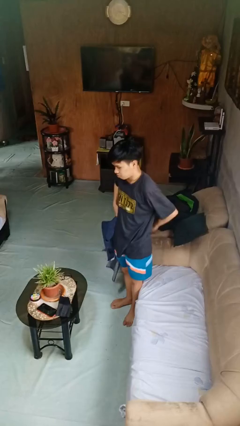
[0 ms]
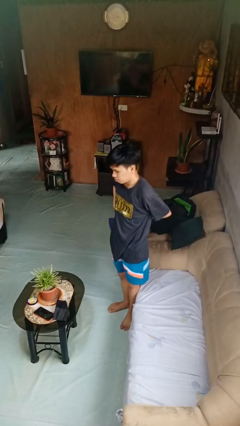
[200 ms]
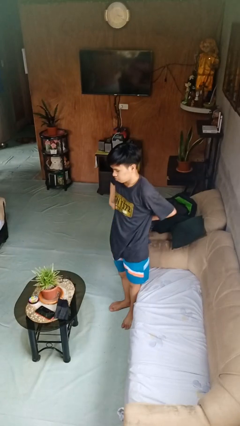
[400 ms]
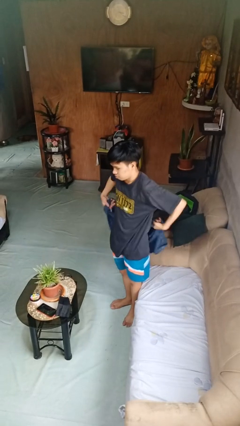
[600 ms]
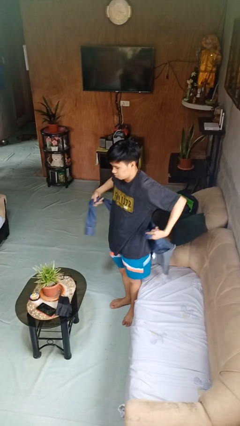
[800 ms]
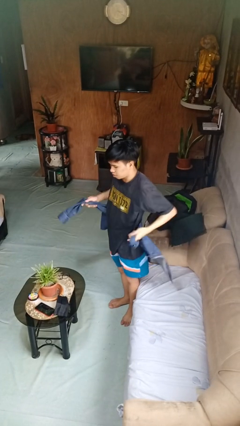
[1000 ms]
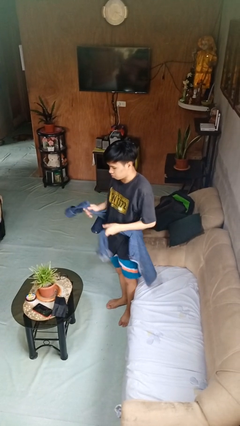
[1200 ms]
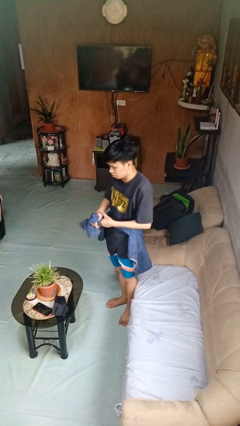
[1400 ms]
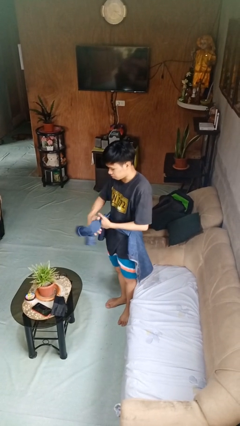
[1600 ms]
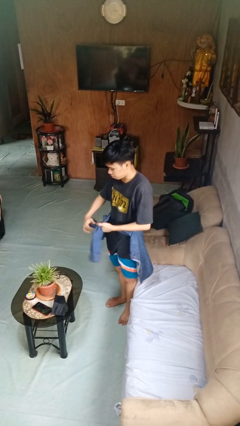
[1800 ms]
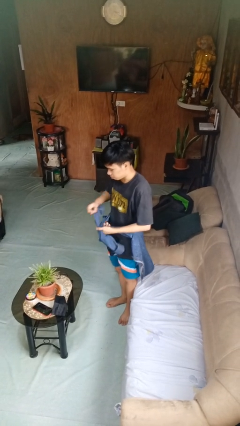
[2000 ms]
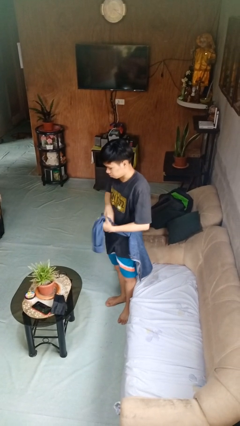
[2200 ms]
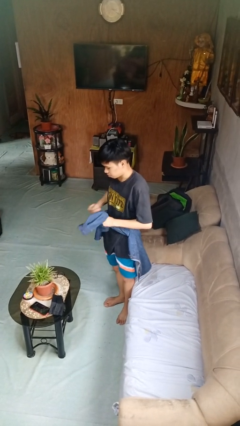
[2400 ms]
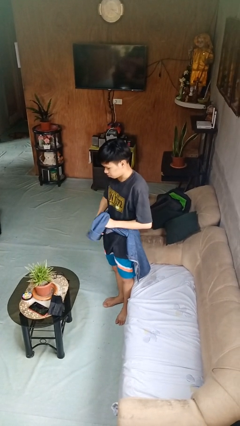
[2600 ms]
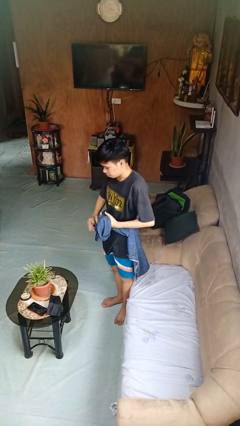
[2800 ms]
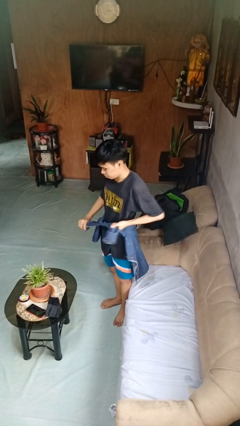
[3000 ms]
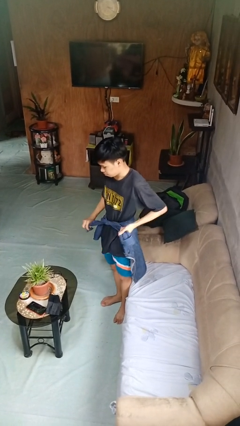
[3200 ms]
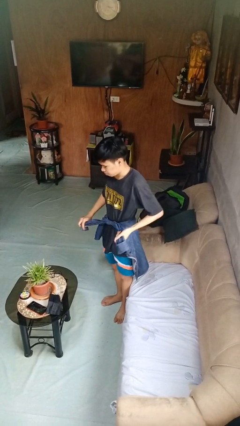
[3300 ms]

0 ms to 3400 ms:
person ties jacket around waist

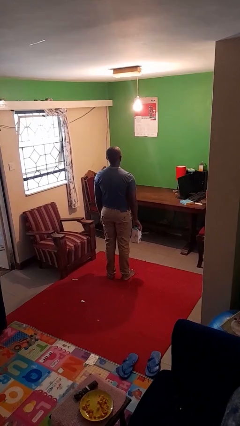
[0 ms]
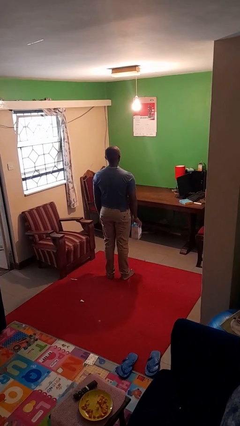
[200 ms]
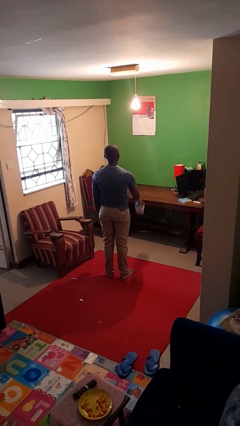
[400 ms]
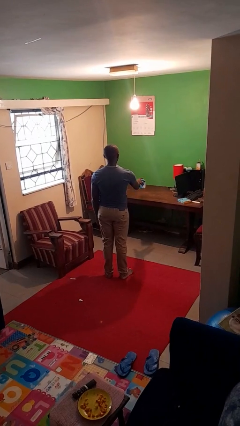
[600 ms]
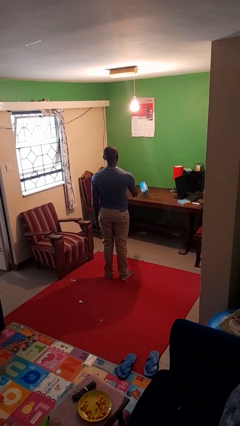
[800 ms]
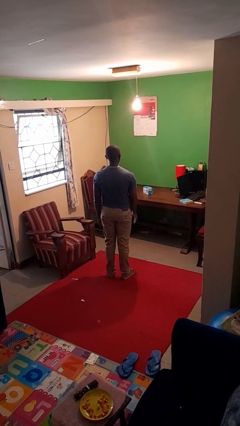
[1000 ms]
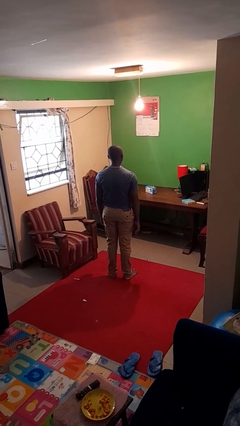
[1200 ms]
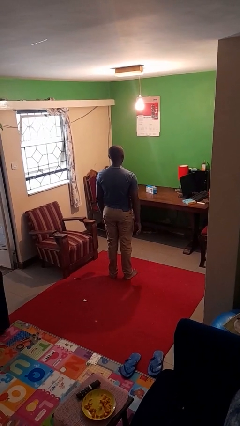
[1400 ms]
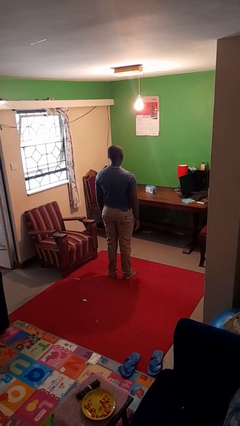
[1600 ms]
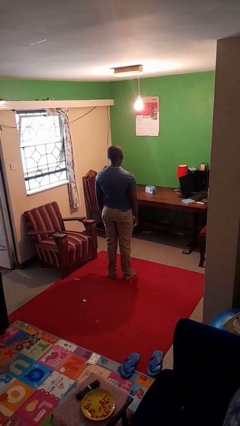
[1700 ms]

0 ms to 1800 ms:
person throws object on table

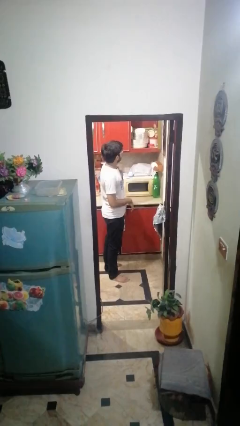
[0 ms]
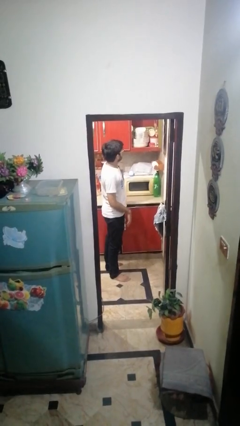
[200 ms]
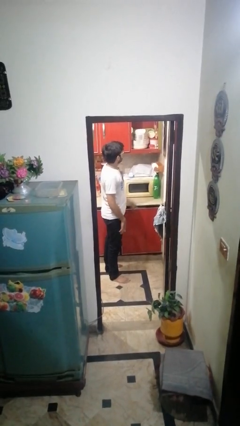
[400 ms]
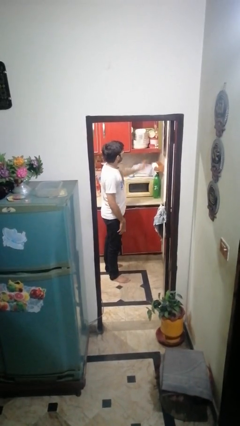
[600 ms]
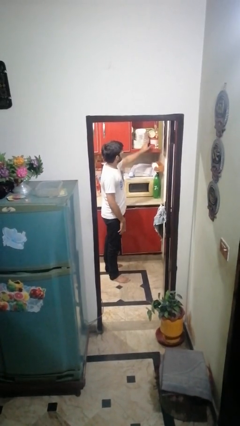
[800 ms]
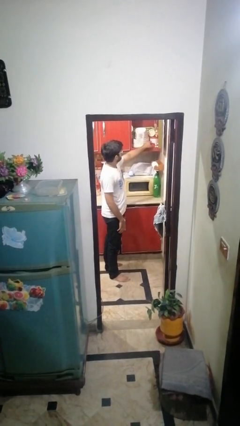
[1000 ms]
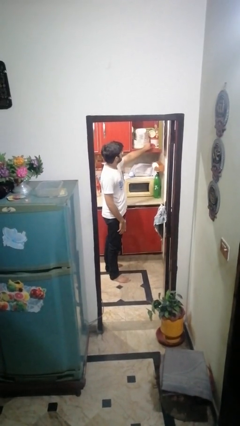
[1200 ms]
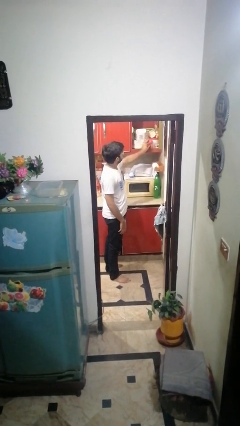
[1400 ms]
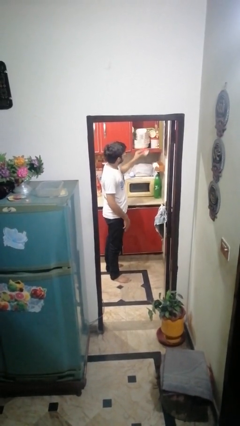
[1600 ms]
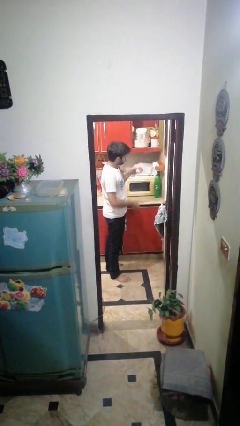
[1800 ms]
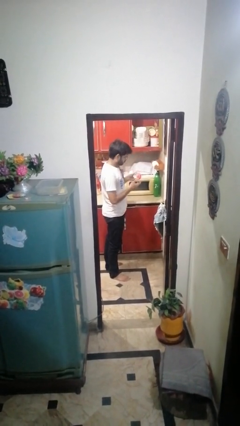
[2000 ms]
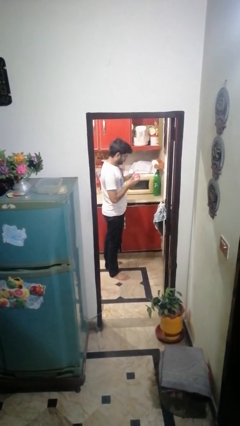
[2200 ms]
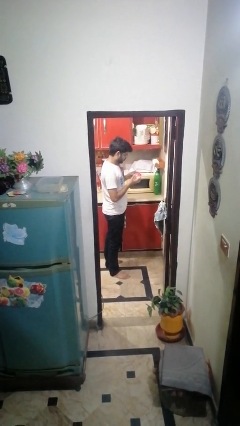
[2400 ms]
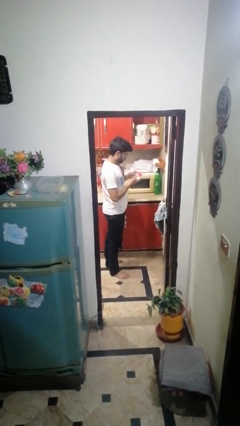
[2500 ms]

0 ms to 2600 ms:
person picks up object from cabinet

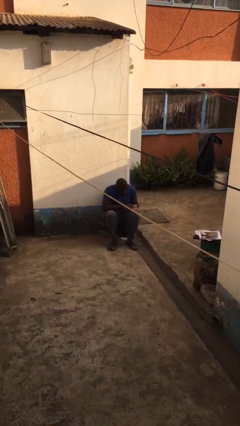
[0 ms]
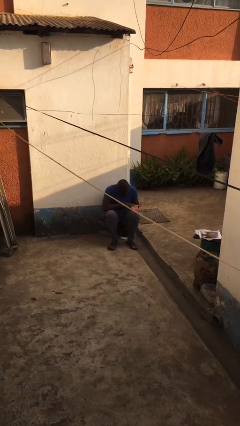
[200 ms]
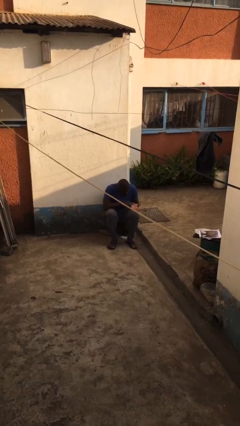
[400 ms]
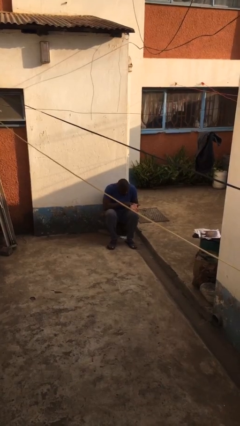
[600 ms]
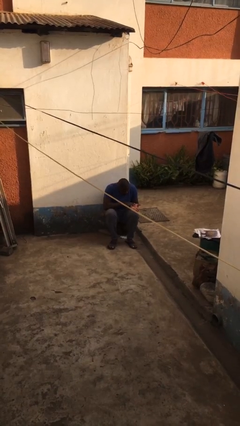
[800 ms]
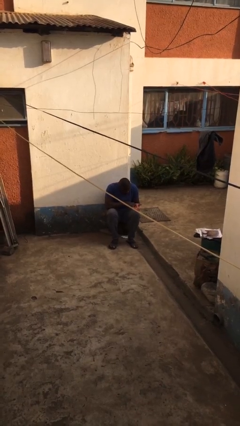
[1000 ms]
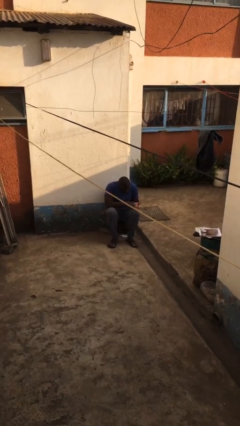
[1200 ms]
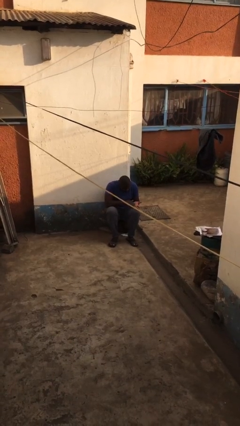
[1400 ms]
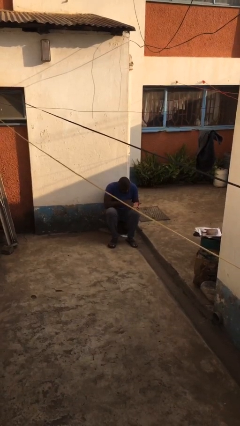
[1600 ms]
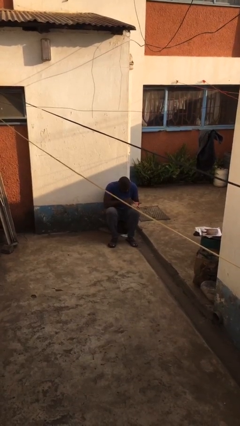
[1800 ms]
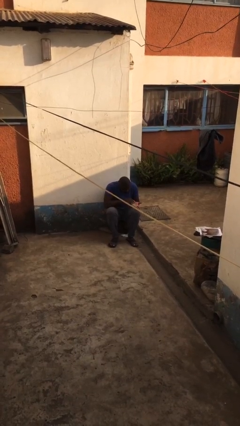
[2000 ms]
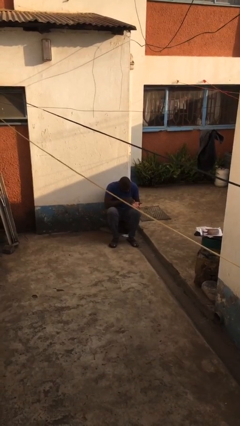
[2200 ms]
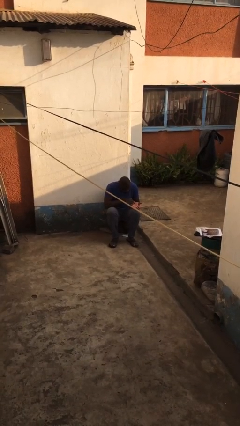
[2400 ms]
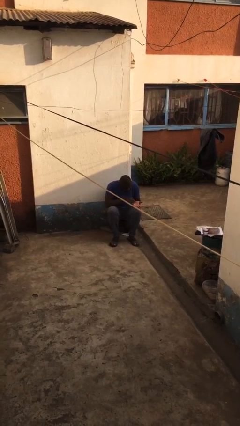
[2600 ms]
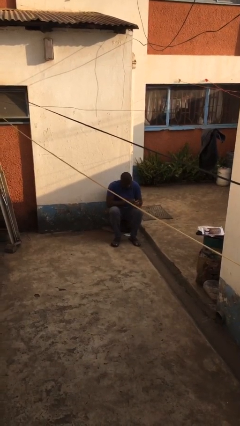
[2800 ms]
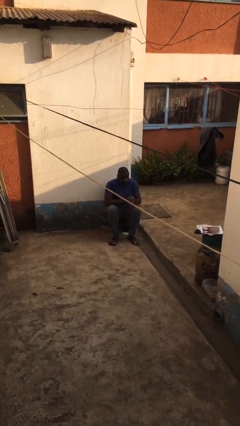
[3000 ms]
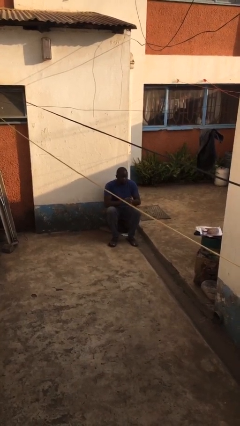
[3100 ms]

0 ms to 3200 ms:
person looks at hands in lap

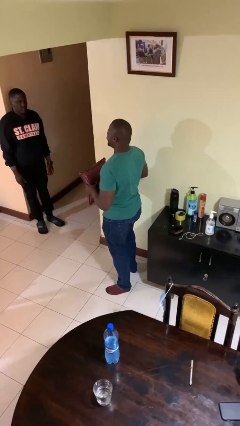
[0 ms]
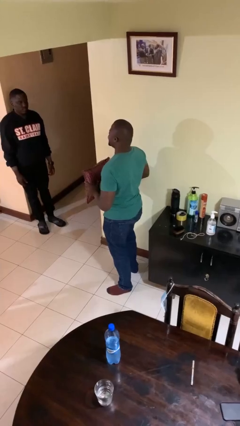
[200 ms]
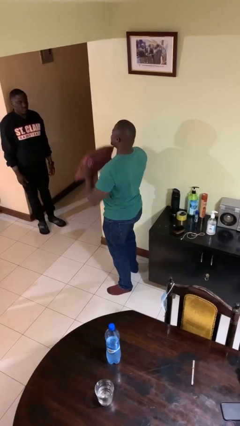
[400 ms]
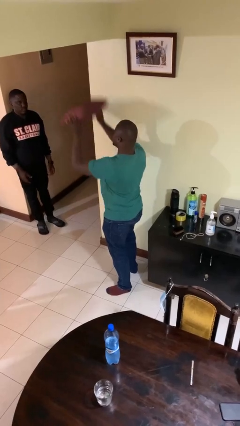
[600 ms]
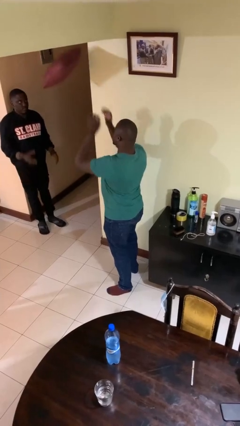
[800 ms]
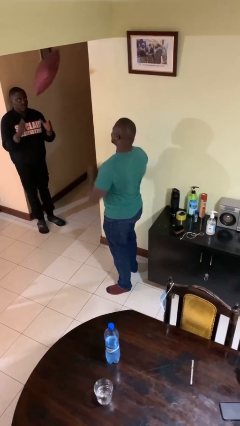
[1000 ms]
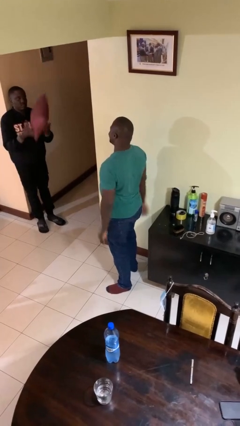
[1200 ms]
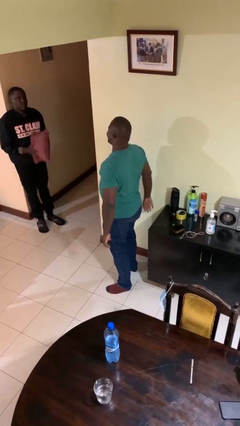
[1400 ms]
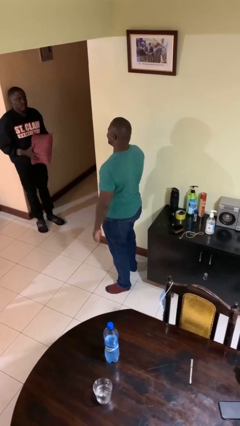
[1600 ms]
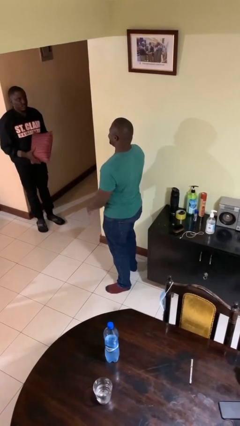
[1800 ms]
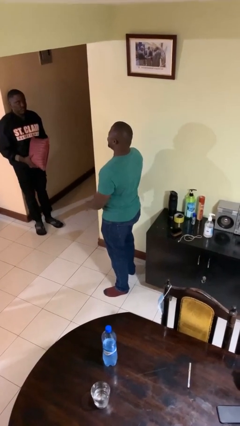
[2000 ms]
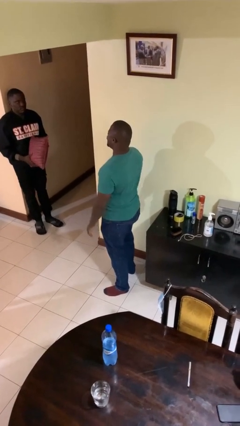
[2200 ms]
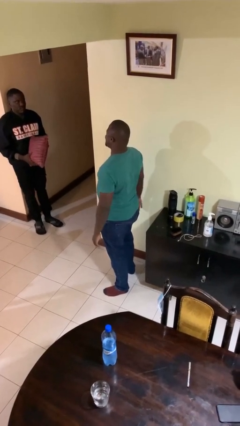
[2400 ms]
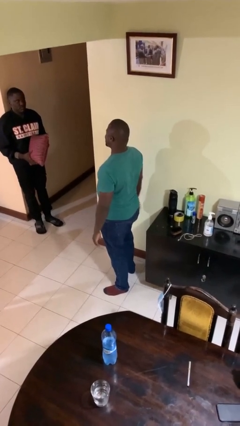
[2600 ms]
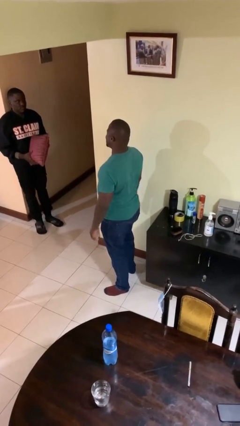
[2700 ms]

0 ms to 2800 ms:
person throws object to person

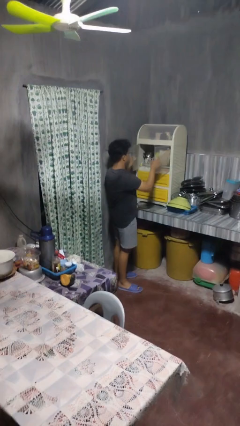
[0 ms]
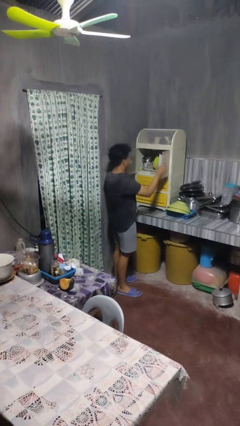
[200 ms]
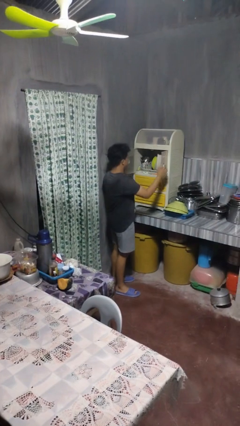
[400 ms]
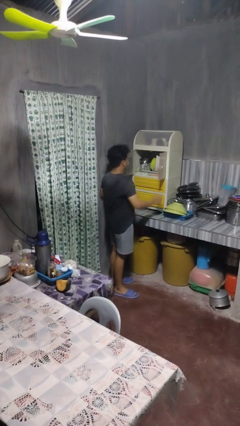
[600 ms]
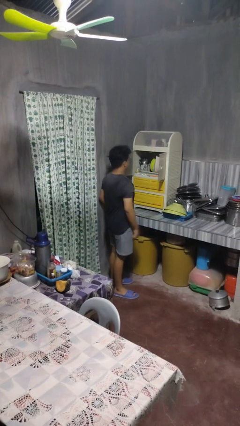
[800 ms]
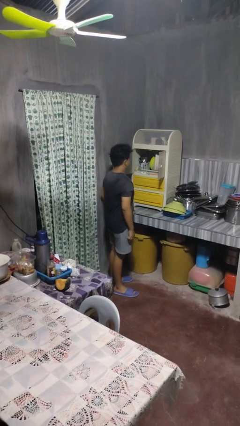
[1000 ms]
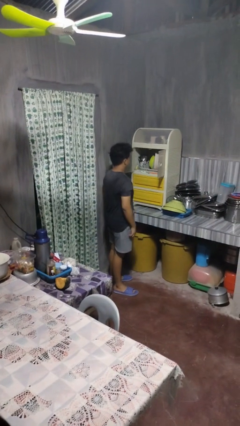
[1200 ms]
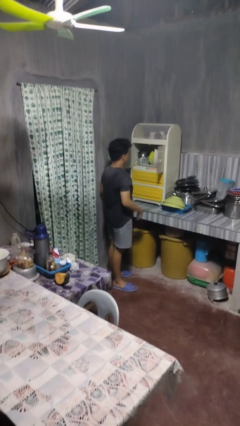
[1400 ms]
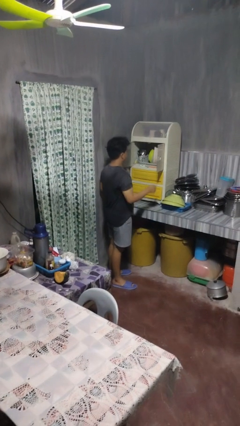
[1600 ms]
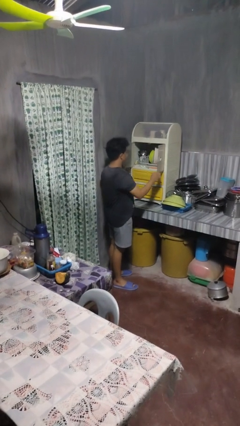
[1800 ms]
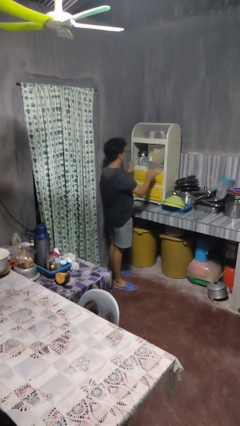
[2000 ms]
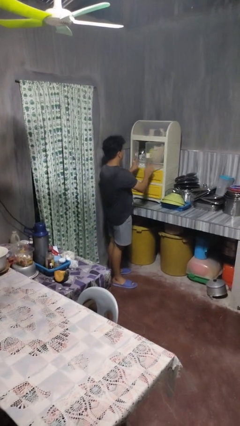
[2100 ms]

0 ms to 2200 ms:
person opens cabinet

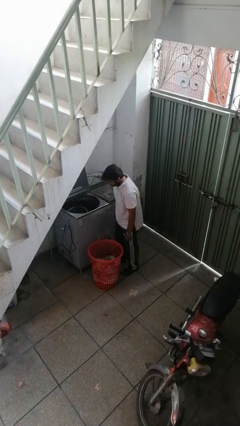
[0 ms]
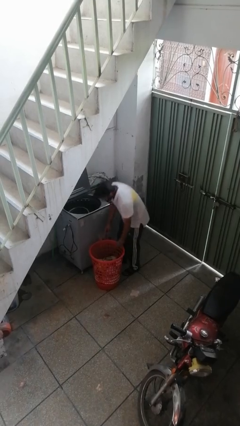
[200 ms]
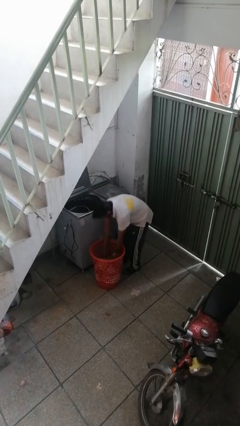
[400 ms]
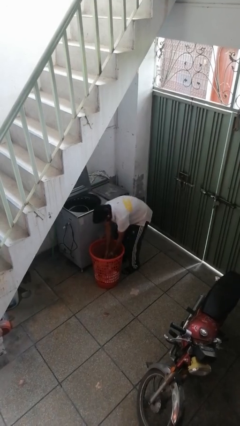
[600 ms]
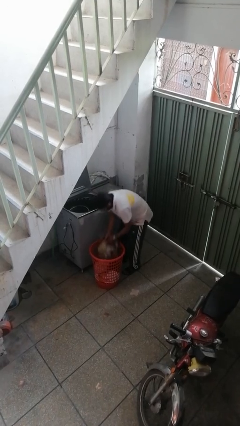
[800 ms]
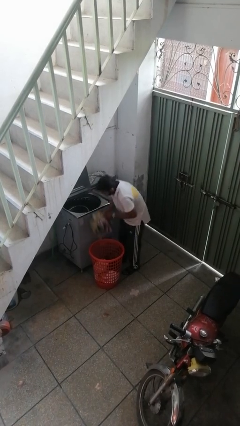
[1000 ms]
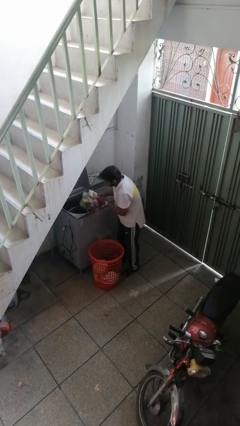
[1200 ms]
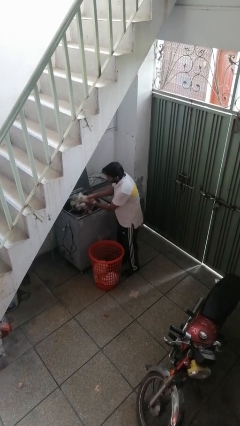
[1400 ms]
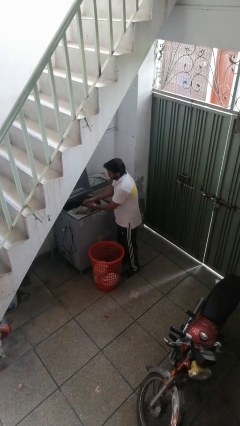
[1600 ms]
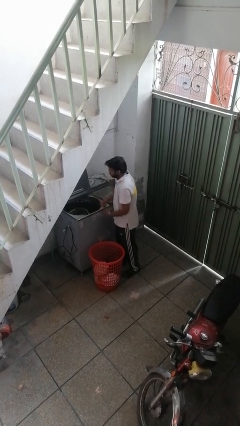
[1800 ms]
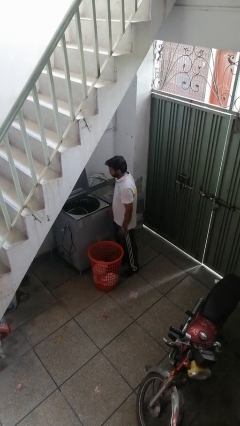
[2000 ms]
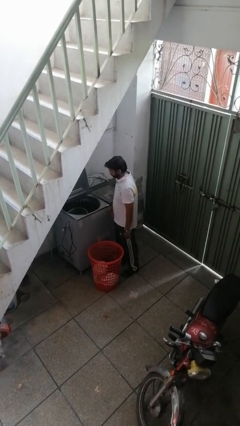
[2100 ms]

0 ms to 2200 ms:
person loads clotheswasher
